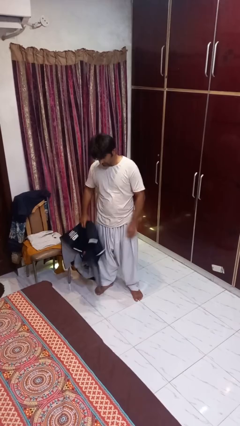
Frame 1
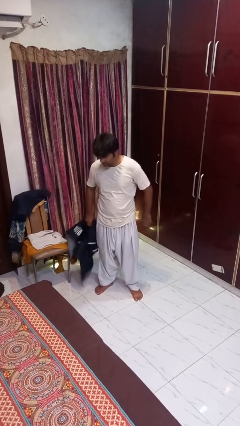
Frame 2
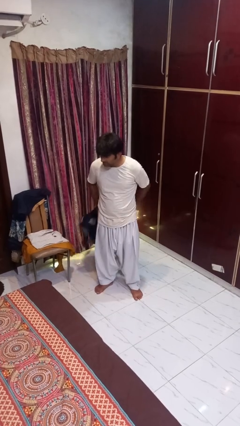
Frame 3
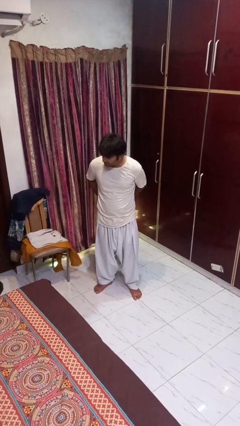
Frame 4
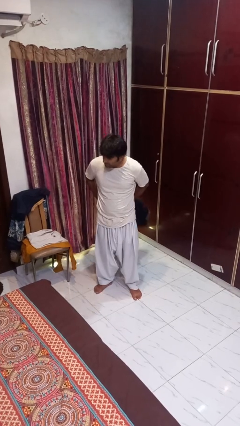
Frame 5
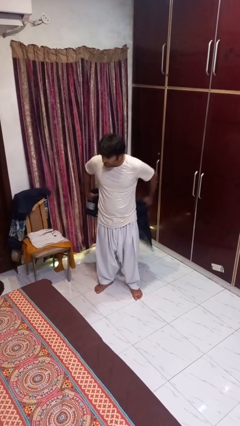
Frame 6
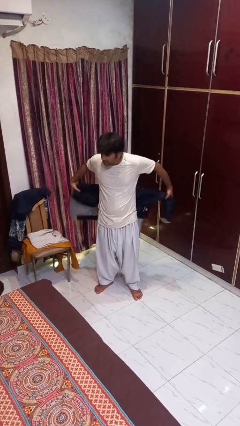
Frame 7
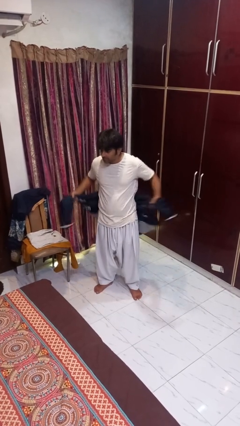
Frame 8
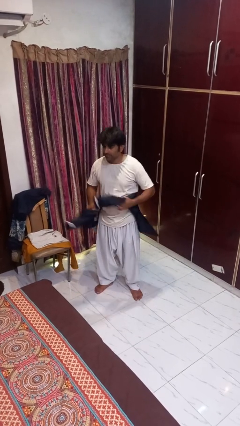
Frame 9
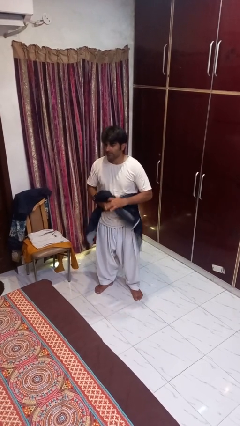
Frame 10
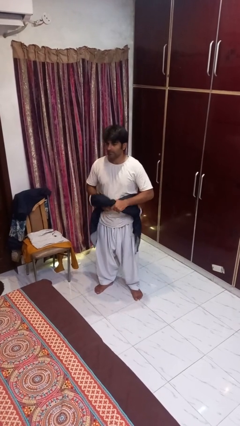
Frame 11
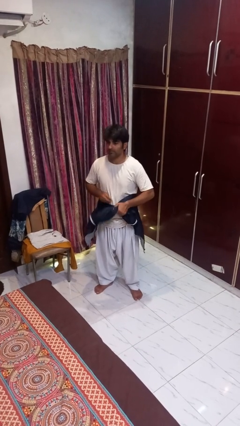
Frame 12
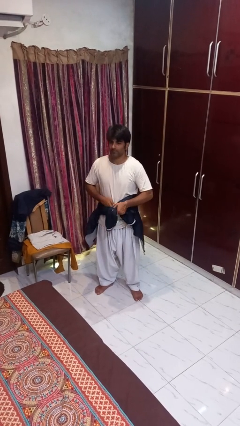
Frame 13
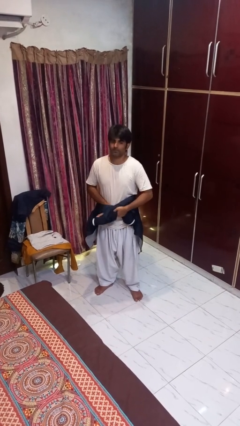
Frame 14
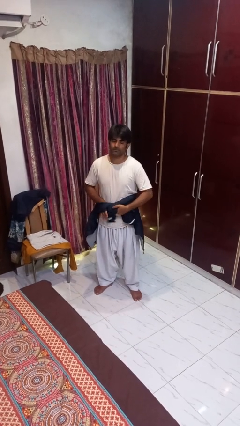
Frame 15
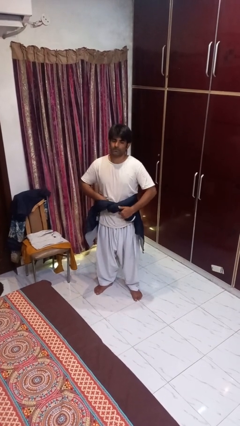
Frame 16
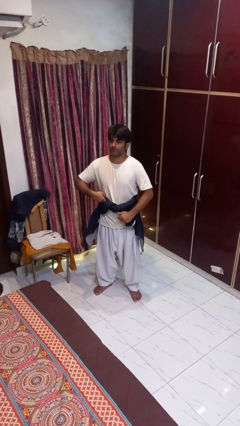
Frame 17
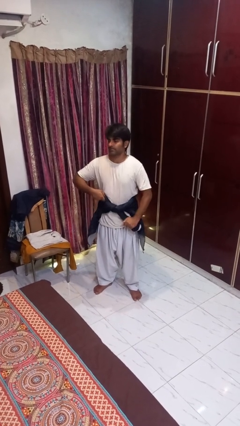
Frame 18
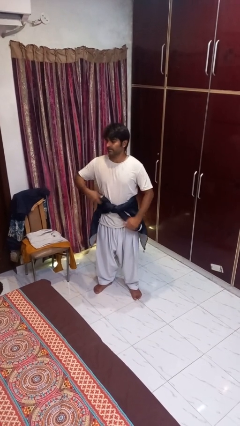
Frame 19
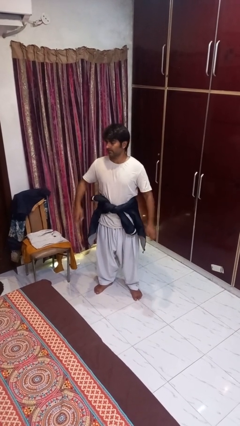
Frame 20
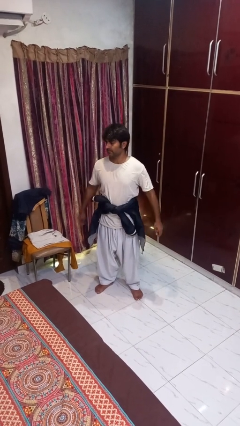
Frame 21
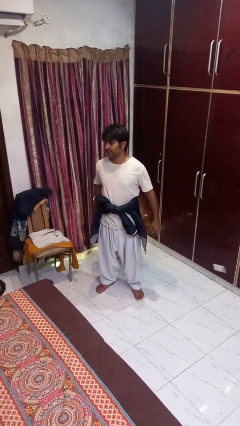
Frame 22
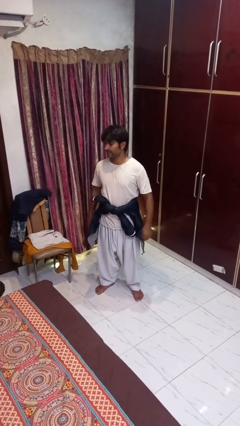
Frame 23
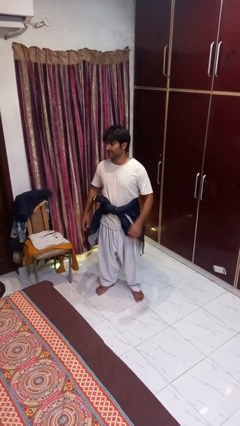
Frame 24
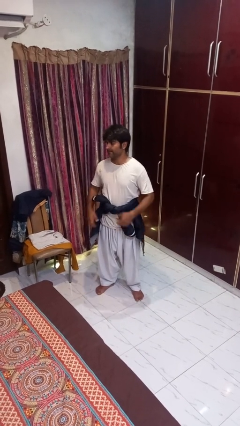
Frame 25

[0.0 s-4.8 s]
person ties jacket around waist

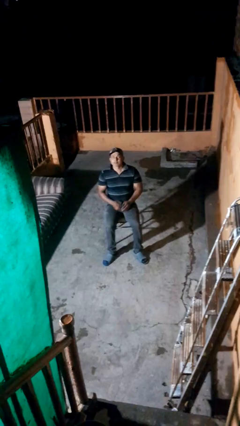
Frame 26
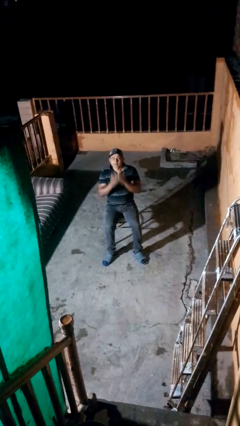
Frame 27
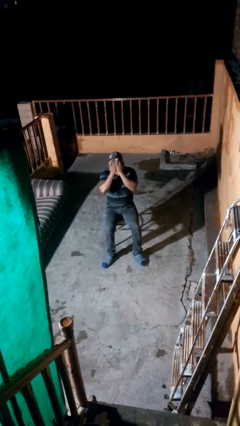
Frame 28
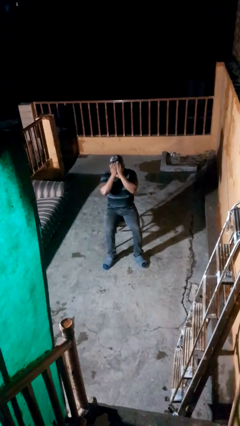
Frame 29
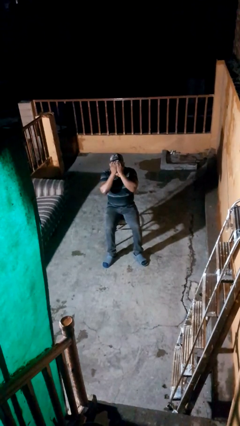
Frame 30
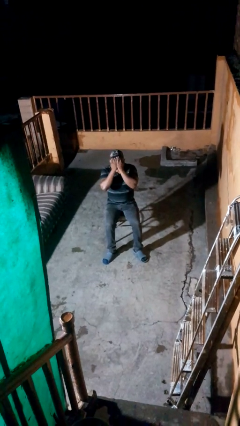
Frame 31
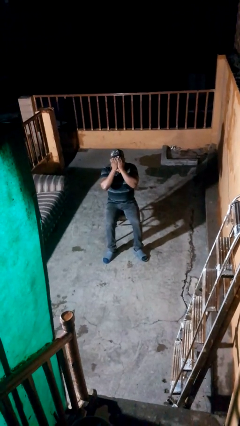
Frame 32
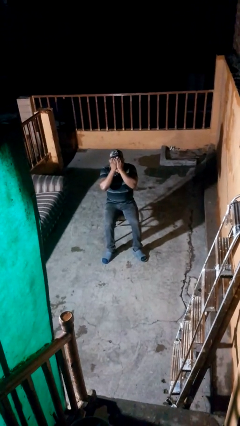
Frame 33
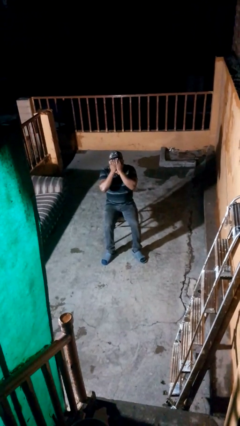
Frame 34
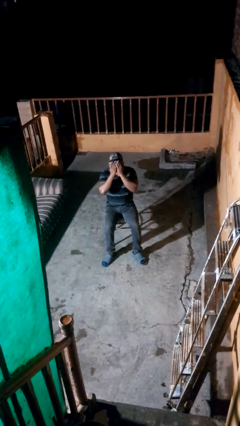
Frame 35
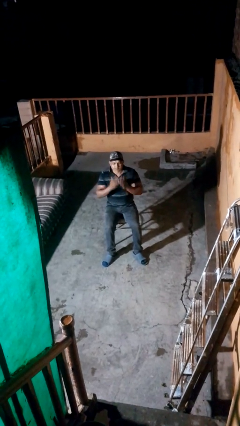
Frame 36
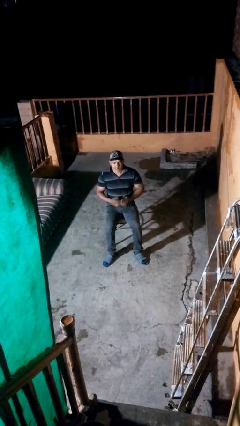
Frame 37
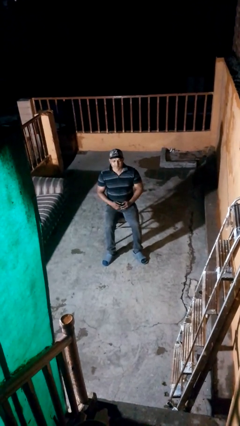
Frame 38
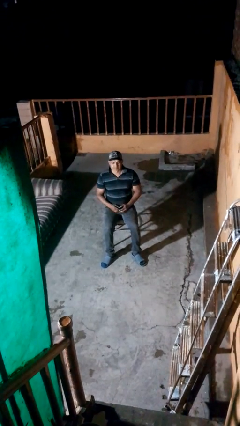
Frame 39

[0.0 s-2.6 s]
person covers face with hands

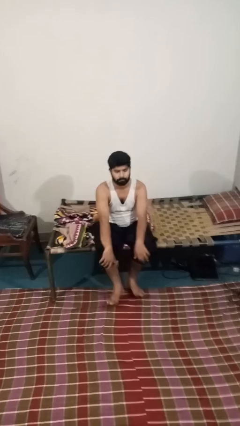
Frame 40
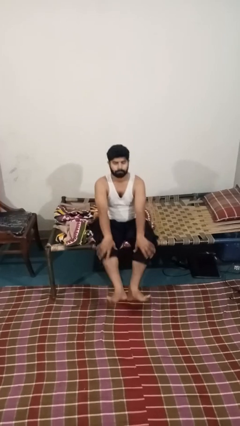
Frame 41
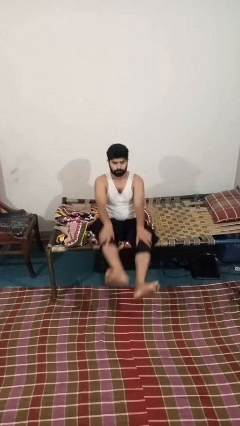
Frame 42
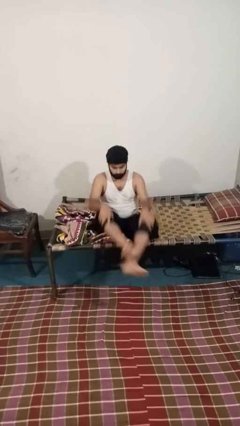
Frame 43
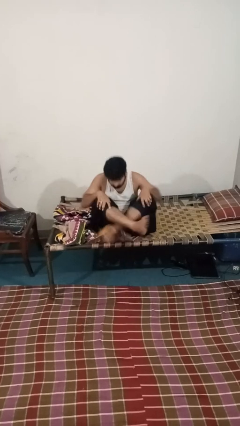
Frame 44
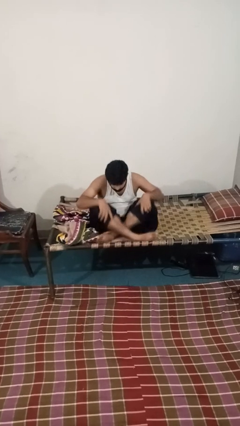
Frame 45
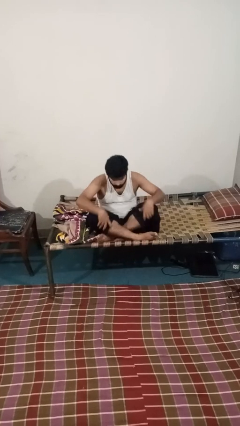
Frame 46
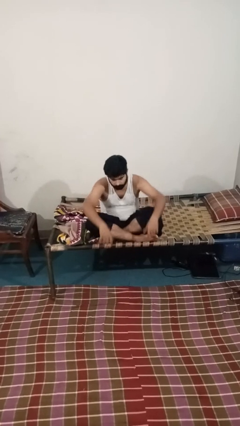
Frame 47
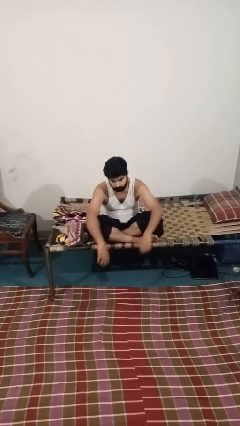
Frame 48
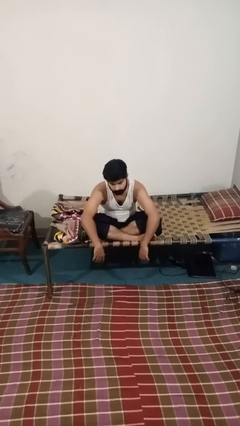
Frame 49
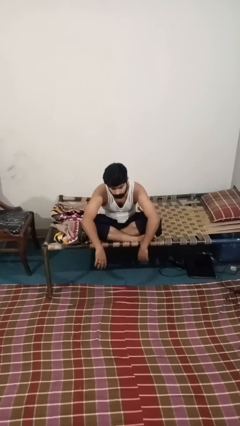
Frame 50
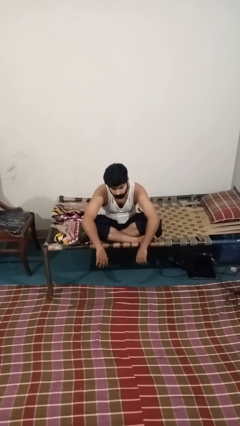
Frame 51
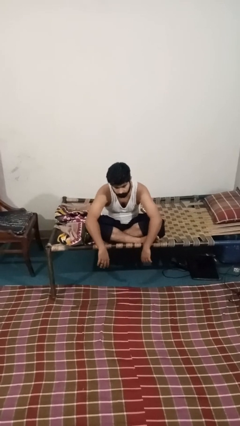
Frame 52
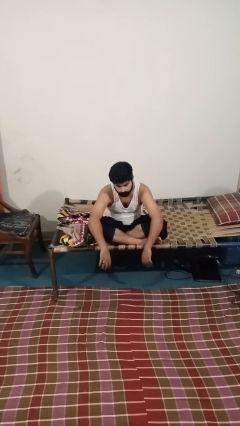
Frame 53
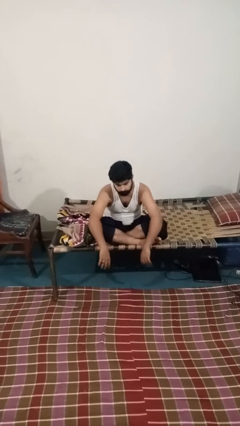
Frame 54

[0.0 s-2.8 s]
person crosses legs

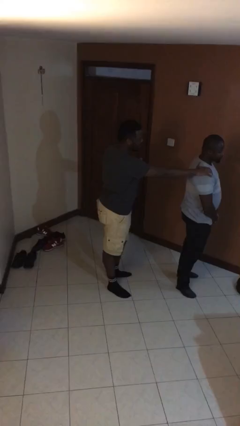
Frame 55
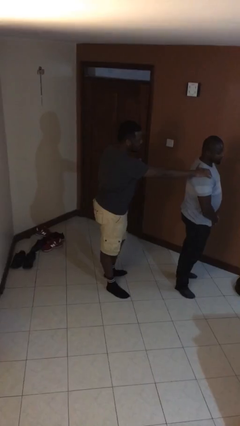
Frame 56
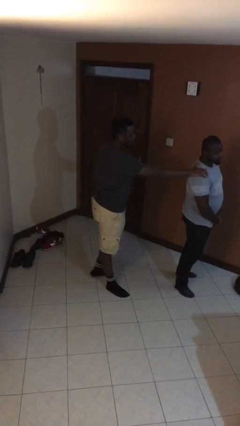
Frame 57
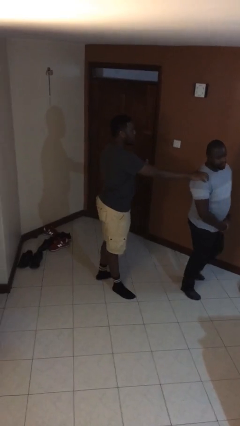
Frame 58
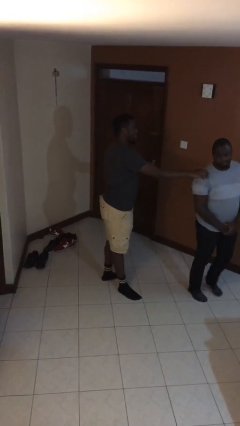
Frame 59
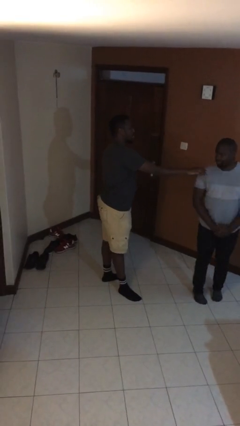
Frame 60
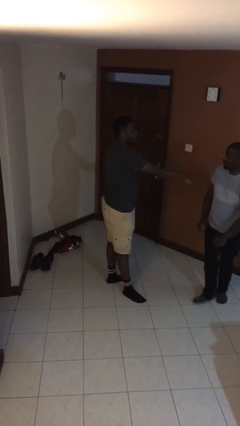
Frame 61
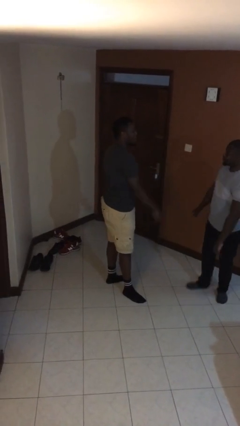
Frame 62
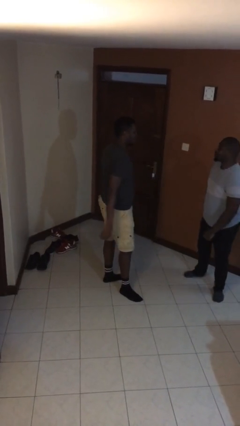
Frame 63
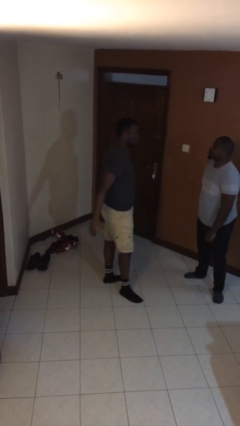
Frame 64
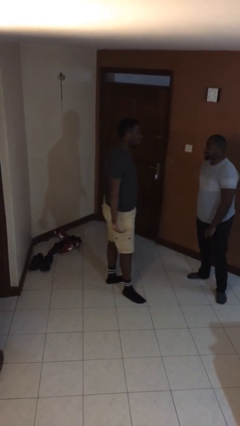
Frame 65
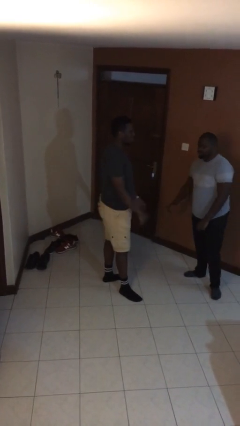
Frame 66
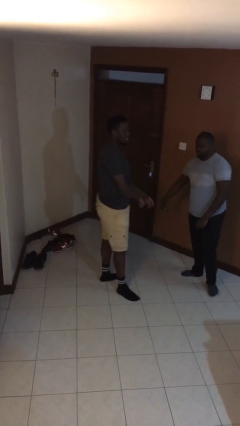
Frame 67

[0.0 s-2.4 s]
person spins person around

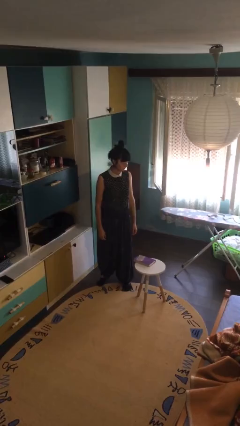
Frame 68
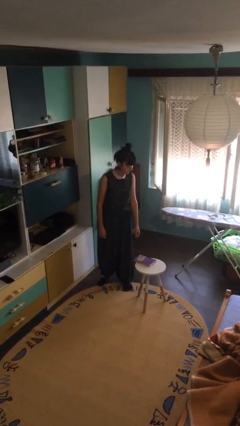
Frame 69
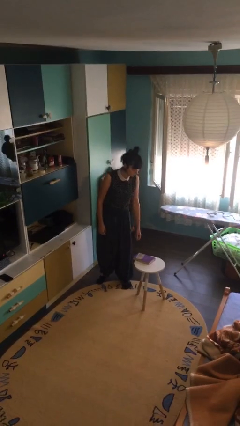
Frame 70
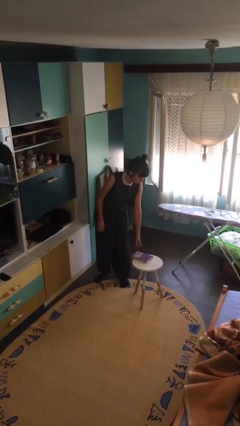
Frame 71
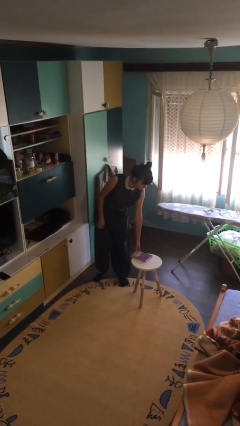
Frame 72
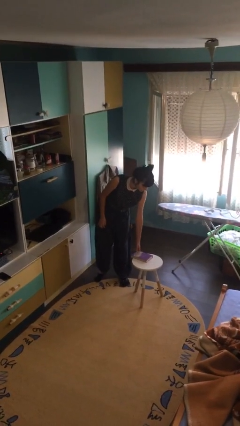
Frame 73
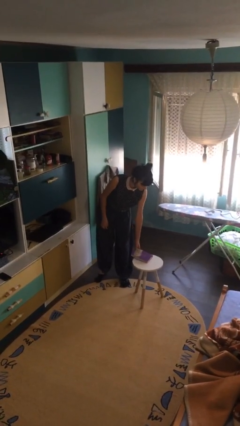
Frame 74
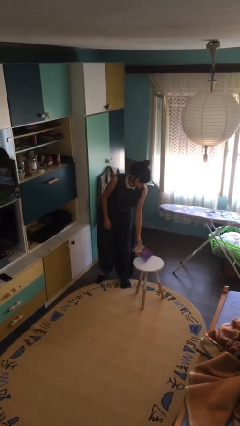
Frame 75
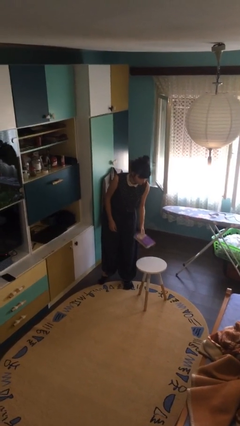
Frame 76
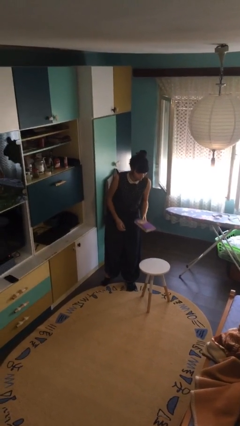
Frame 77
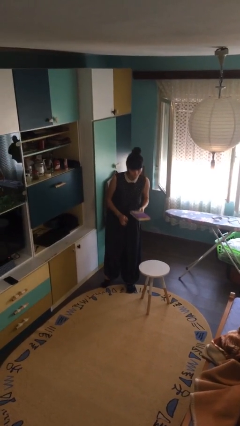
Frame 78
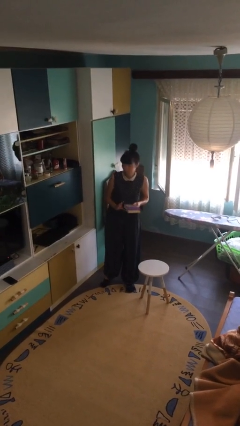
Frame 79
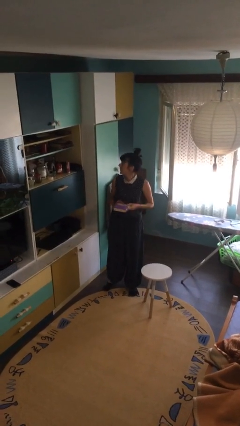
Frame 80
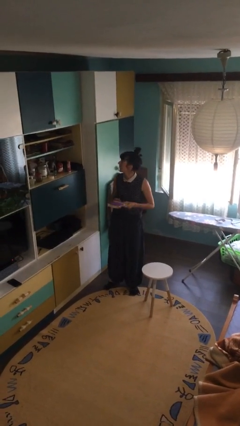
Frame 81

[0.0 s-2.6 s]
person picks up object from table

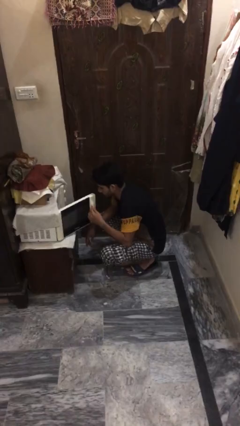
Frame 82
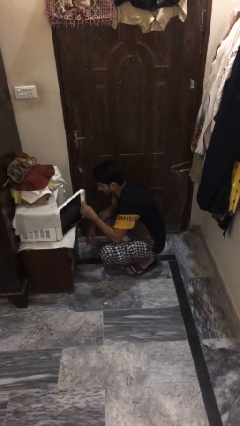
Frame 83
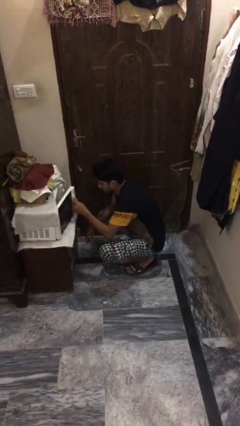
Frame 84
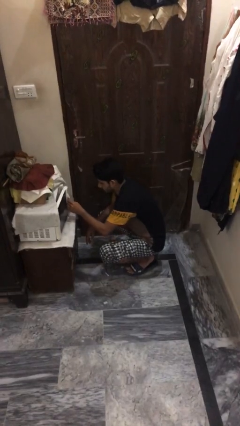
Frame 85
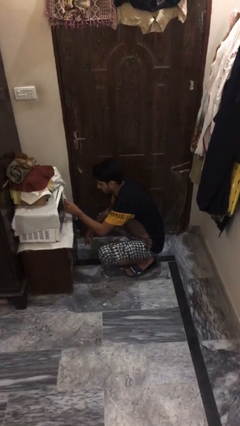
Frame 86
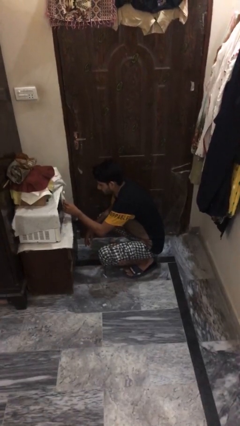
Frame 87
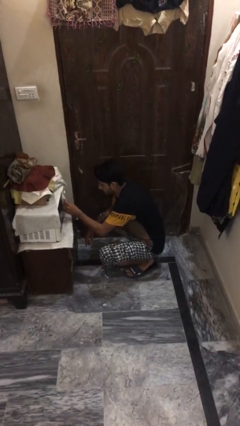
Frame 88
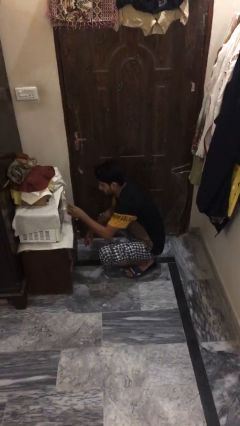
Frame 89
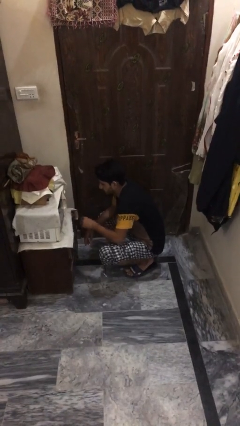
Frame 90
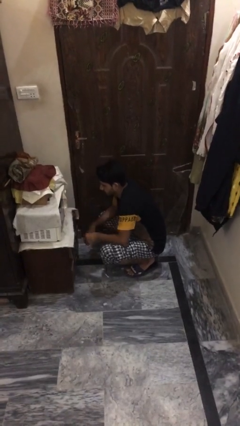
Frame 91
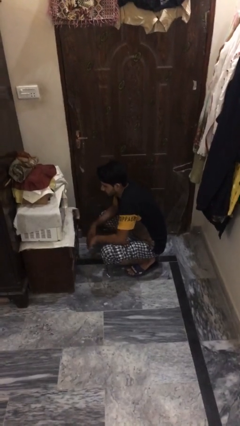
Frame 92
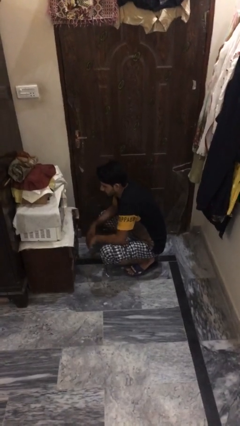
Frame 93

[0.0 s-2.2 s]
person closes microwave
